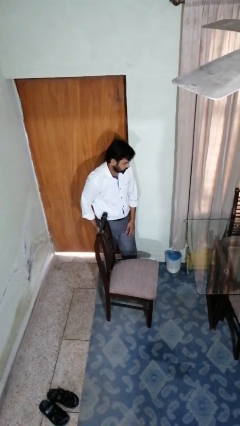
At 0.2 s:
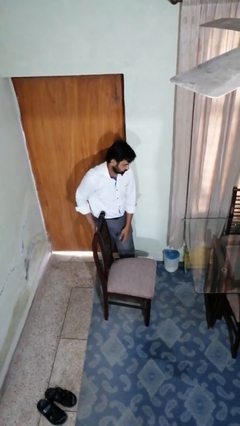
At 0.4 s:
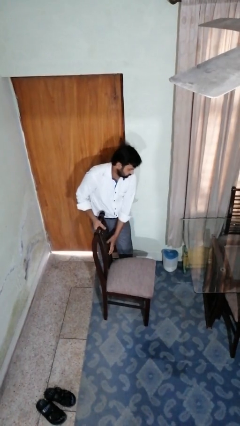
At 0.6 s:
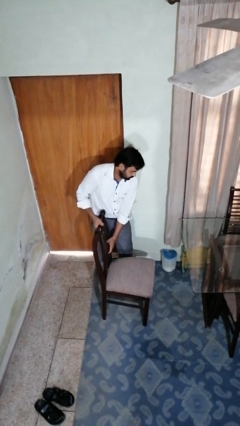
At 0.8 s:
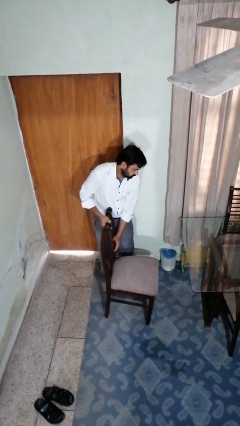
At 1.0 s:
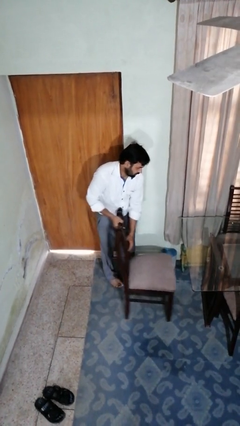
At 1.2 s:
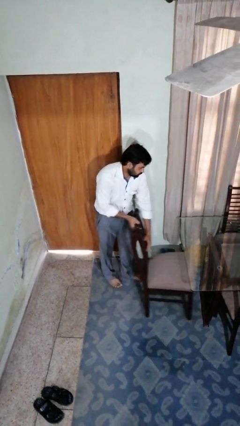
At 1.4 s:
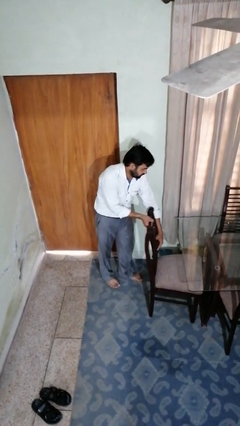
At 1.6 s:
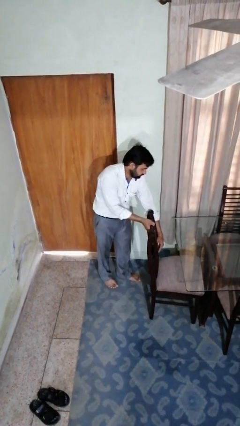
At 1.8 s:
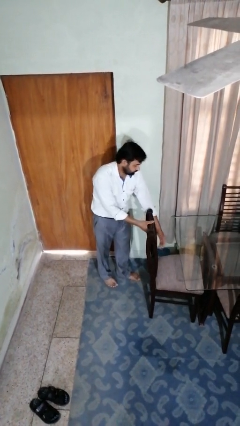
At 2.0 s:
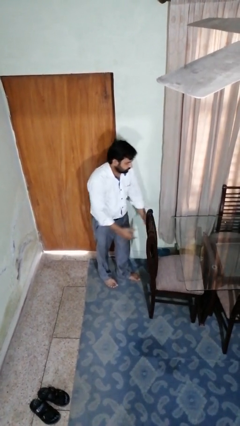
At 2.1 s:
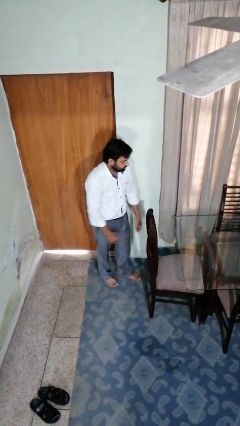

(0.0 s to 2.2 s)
person pushes in chair

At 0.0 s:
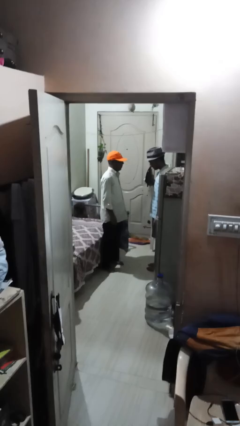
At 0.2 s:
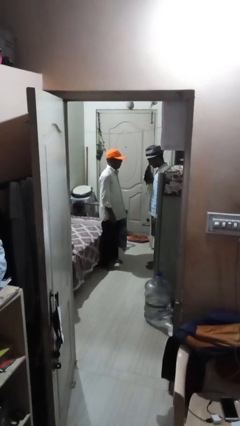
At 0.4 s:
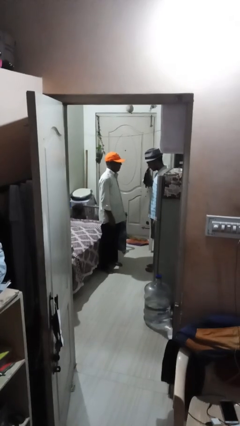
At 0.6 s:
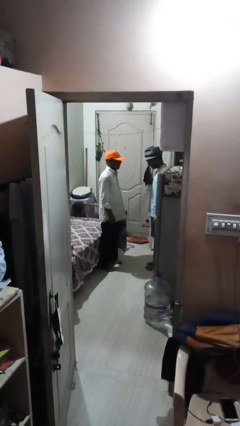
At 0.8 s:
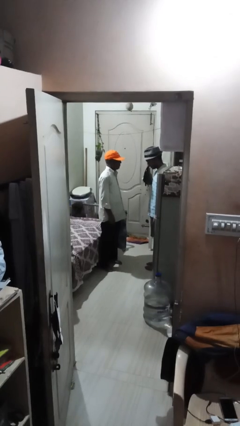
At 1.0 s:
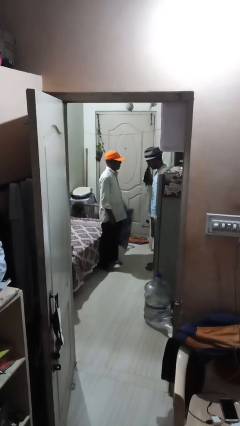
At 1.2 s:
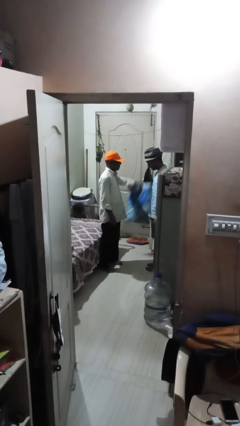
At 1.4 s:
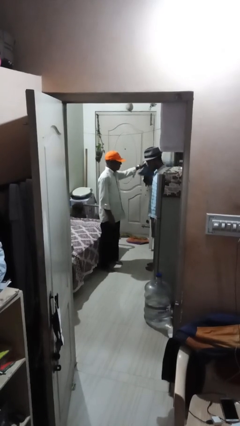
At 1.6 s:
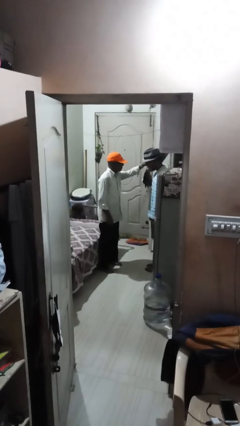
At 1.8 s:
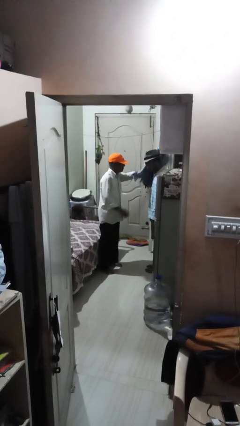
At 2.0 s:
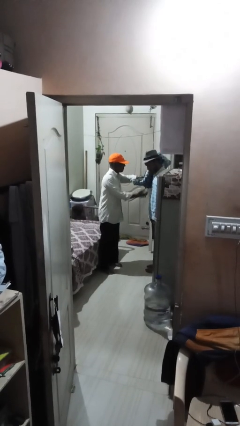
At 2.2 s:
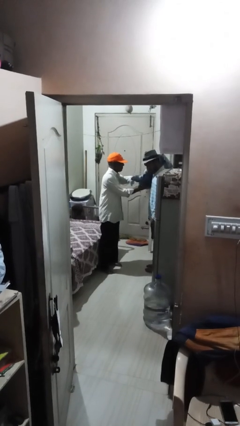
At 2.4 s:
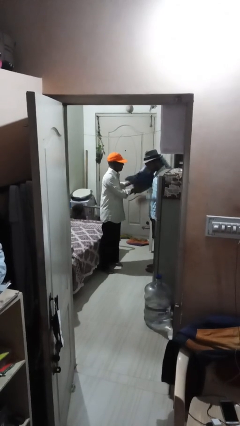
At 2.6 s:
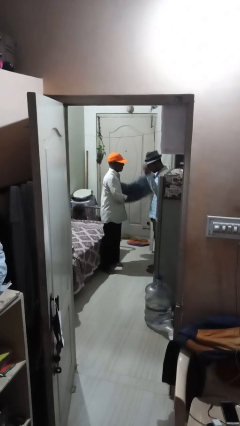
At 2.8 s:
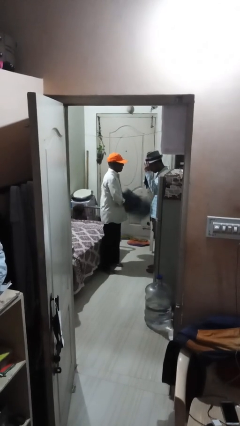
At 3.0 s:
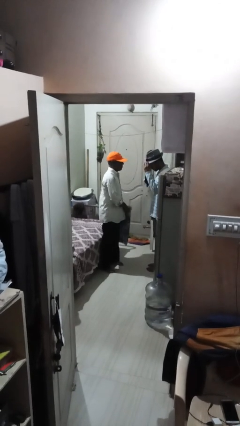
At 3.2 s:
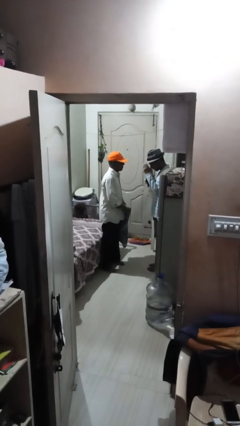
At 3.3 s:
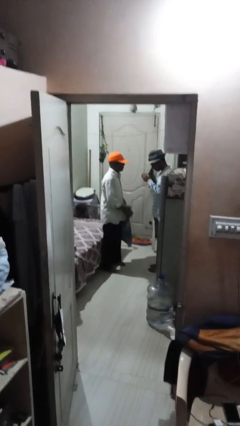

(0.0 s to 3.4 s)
person hits person with pillow

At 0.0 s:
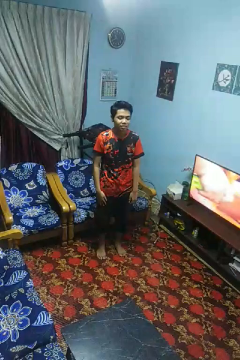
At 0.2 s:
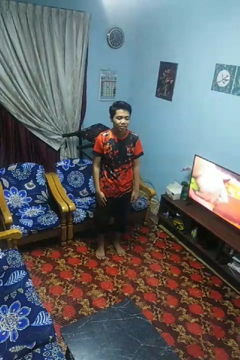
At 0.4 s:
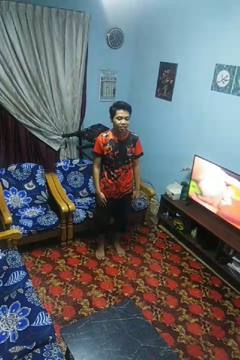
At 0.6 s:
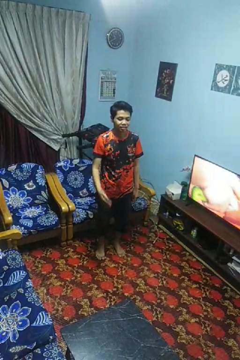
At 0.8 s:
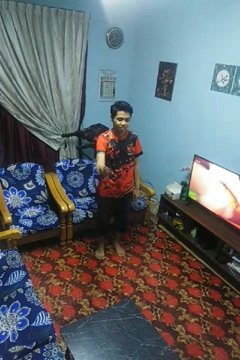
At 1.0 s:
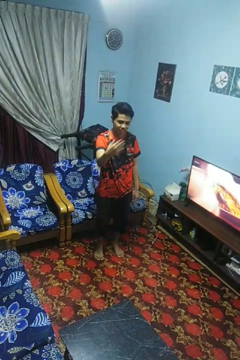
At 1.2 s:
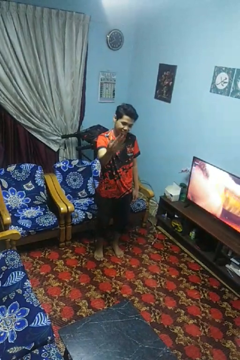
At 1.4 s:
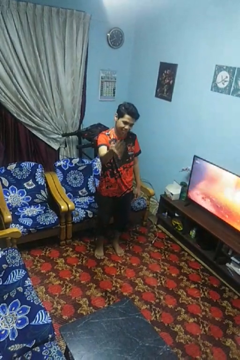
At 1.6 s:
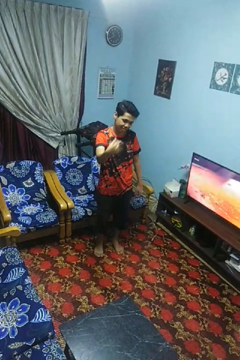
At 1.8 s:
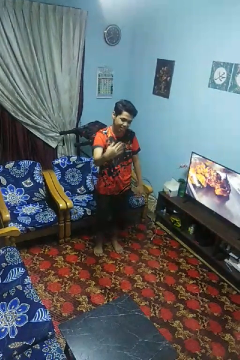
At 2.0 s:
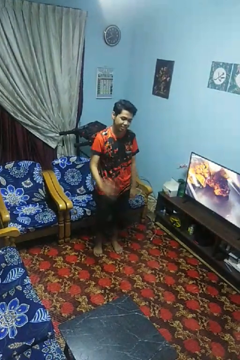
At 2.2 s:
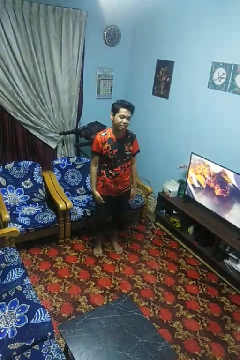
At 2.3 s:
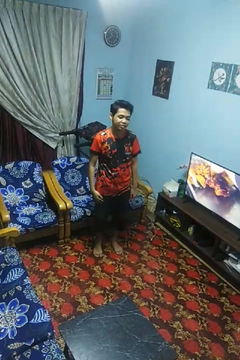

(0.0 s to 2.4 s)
person gestures come here

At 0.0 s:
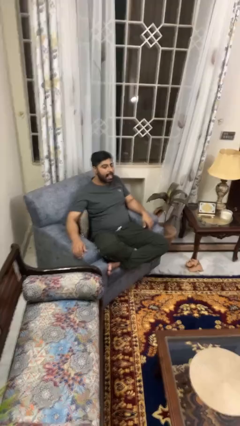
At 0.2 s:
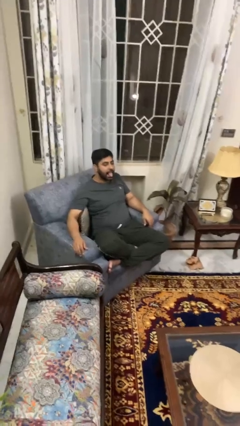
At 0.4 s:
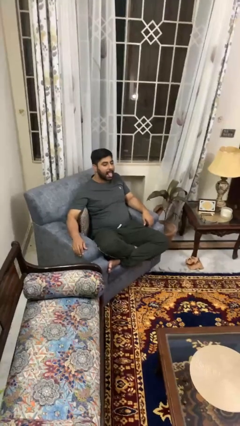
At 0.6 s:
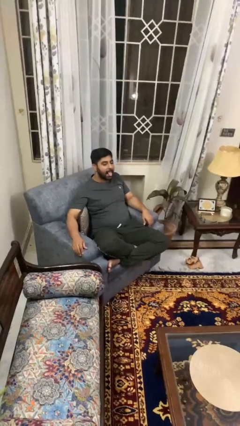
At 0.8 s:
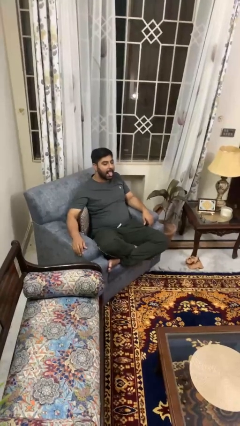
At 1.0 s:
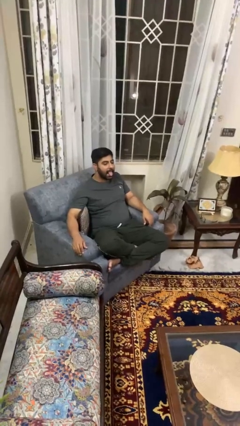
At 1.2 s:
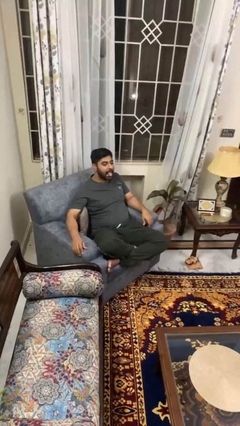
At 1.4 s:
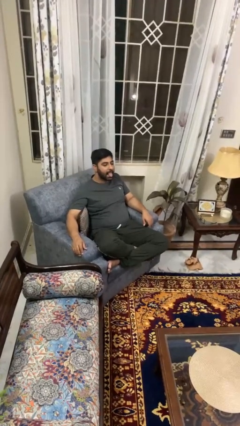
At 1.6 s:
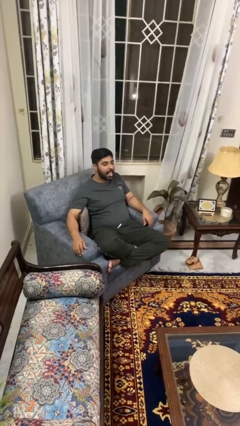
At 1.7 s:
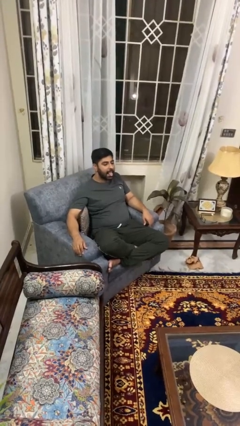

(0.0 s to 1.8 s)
person sticks out tongue

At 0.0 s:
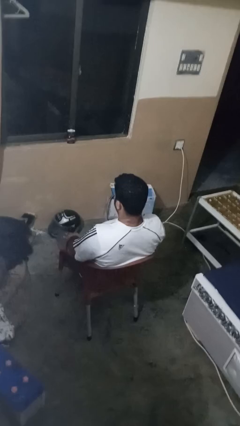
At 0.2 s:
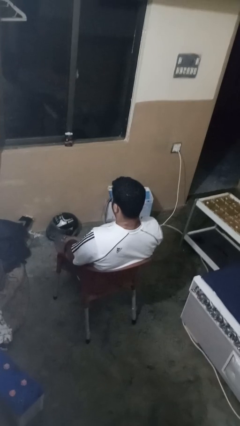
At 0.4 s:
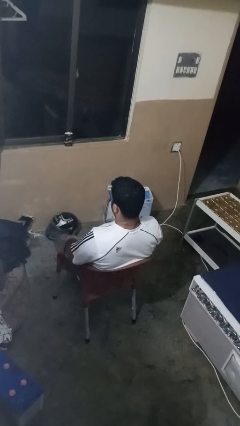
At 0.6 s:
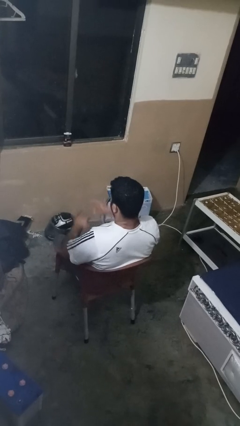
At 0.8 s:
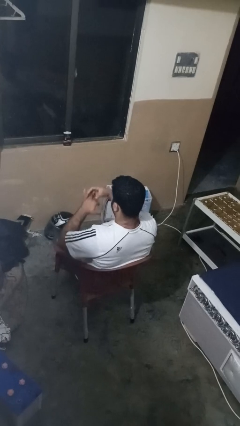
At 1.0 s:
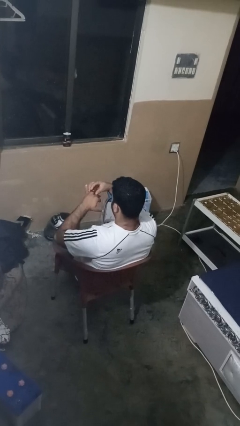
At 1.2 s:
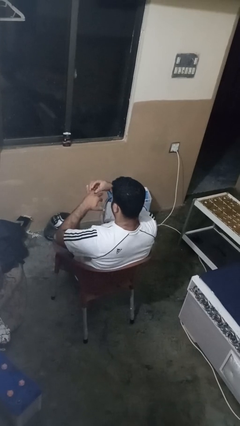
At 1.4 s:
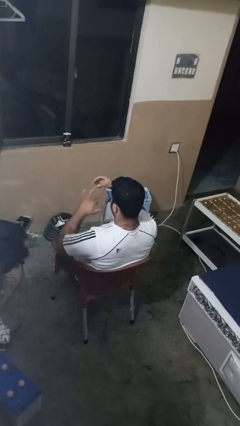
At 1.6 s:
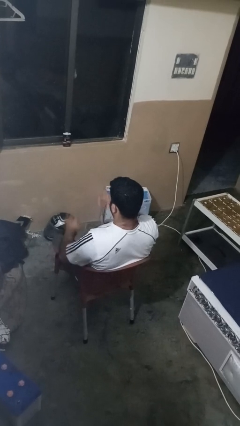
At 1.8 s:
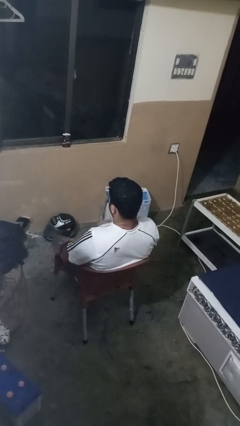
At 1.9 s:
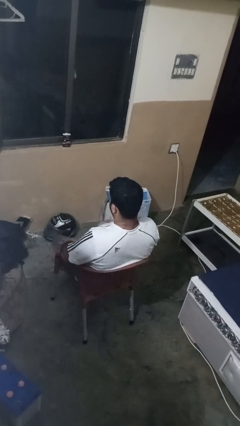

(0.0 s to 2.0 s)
person takes off ring

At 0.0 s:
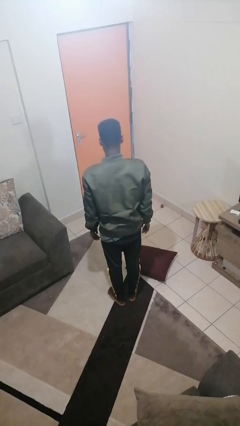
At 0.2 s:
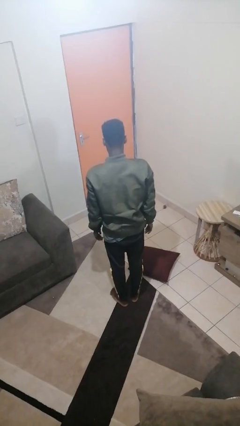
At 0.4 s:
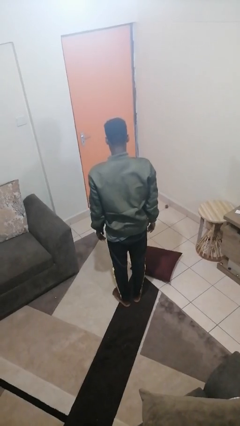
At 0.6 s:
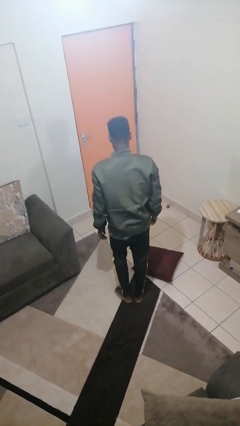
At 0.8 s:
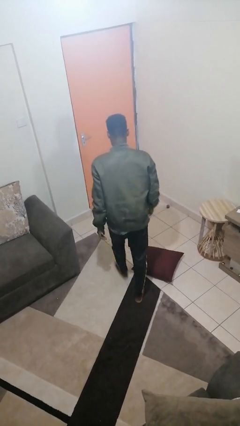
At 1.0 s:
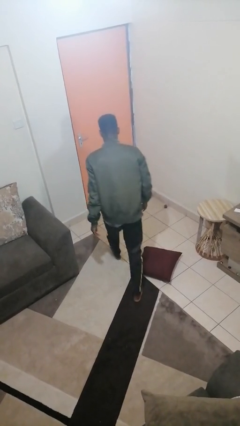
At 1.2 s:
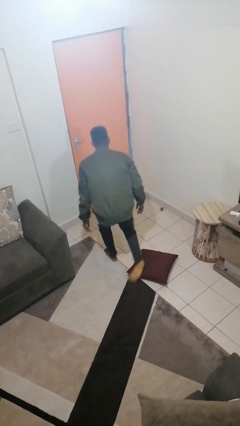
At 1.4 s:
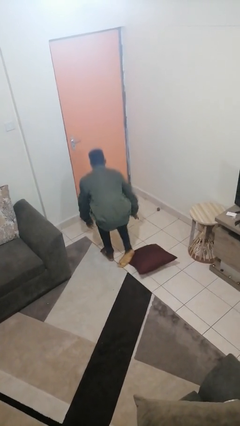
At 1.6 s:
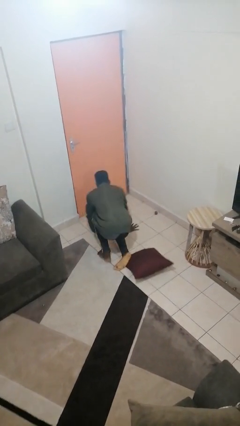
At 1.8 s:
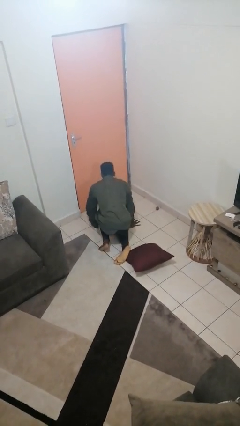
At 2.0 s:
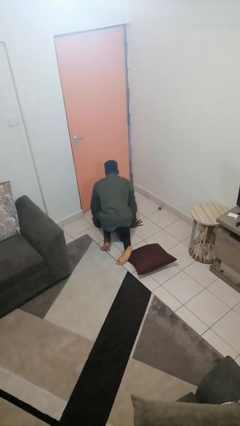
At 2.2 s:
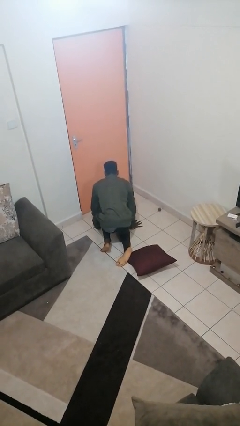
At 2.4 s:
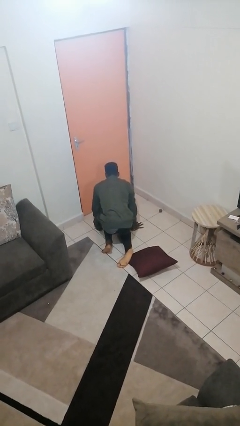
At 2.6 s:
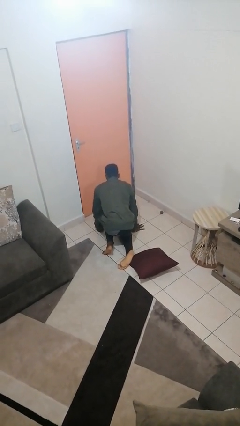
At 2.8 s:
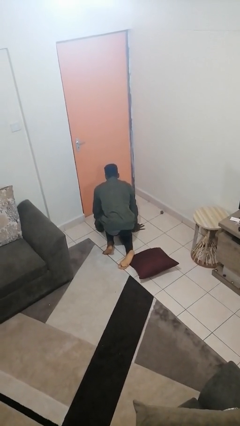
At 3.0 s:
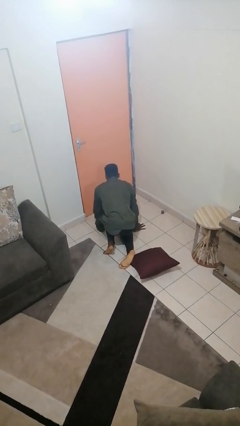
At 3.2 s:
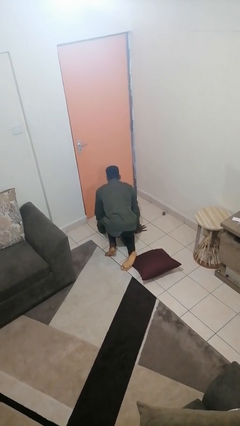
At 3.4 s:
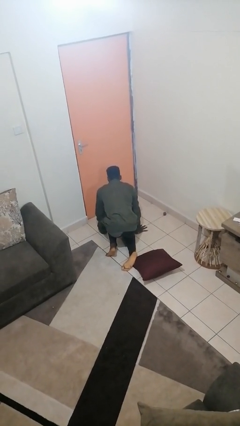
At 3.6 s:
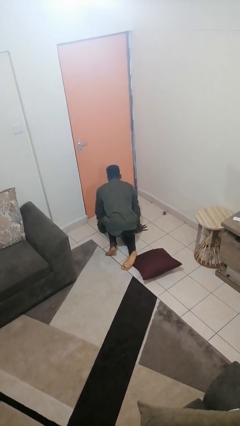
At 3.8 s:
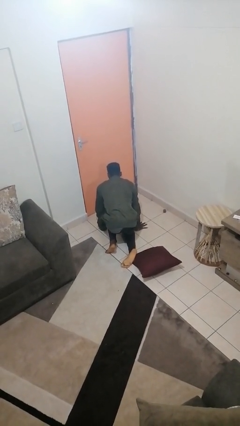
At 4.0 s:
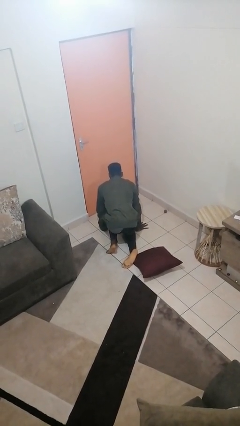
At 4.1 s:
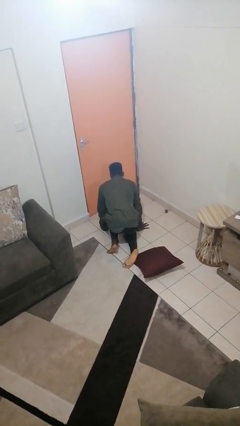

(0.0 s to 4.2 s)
person trips on object on floor

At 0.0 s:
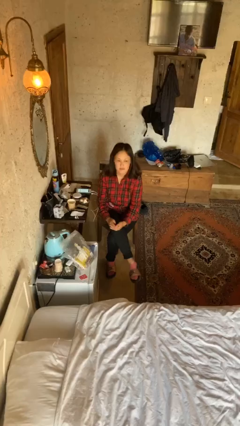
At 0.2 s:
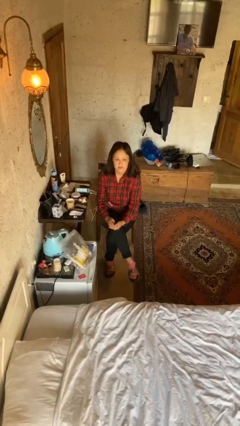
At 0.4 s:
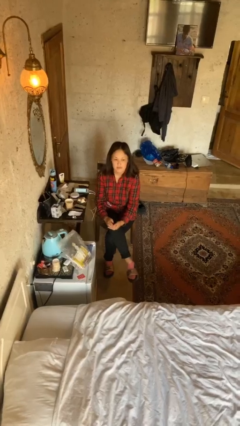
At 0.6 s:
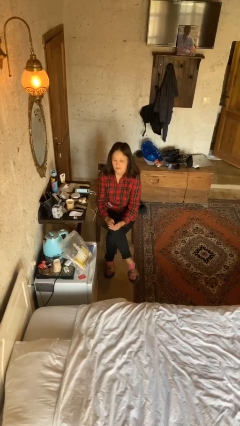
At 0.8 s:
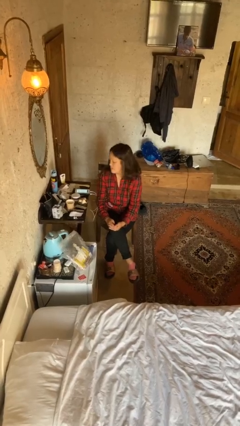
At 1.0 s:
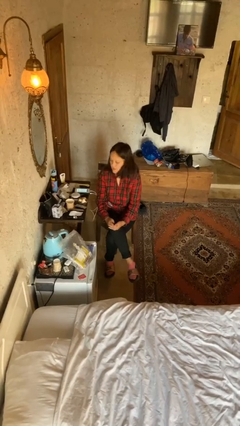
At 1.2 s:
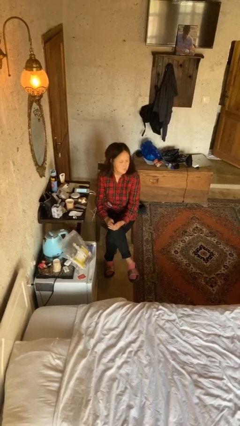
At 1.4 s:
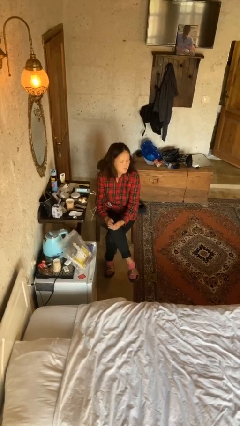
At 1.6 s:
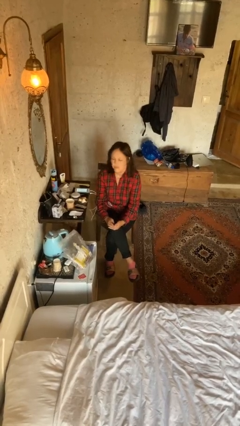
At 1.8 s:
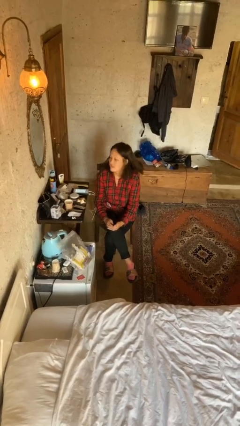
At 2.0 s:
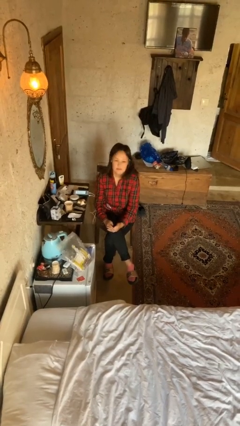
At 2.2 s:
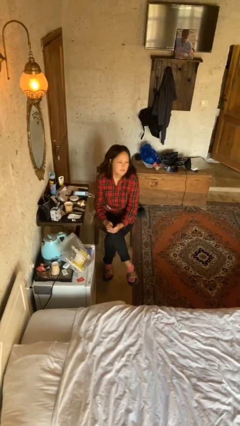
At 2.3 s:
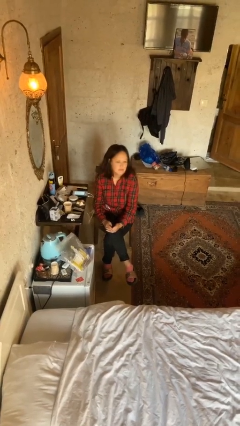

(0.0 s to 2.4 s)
person shakes head
